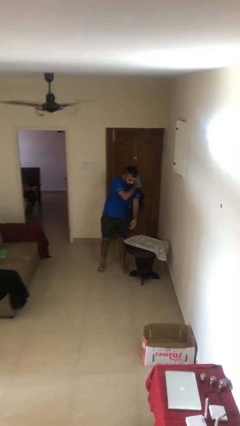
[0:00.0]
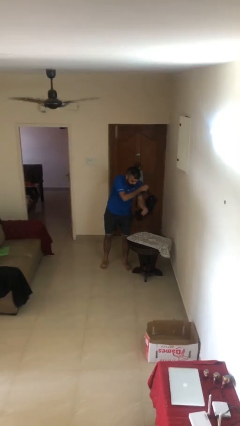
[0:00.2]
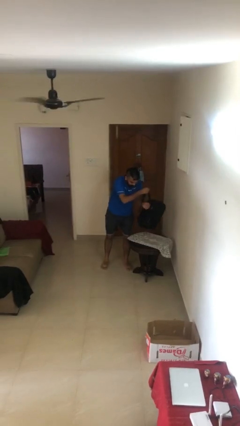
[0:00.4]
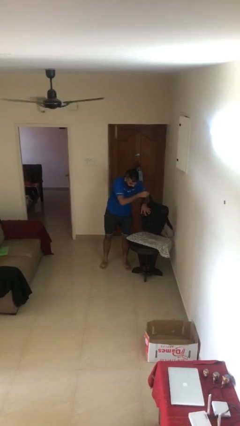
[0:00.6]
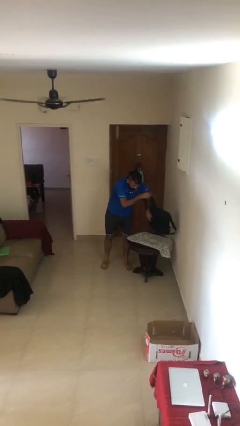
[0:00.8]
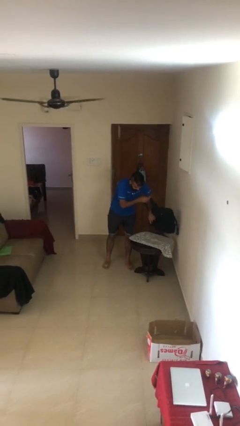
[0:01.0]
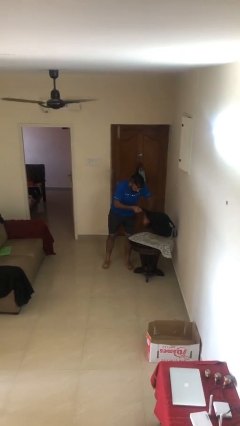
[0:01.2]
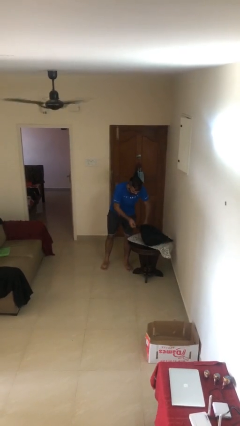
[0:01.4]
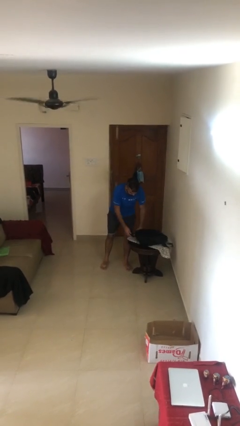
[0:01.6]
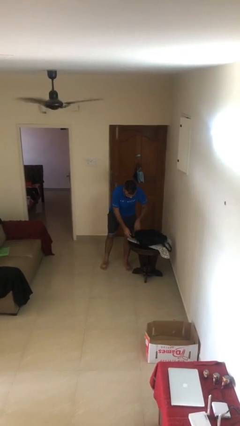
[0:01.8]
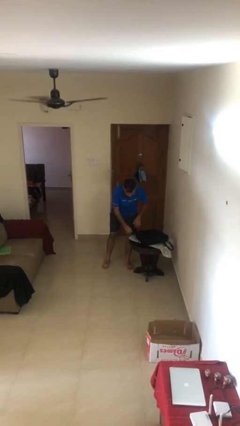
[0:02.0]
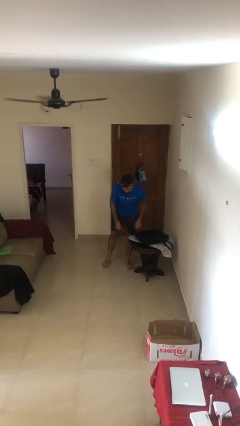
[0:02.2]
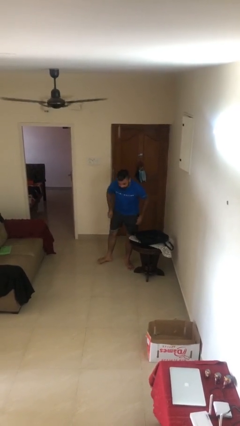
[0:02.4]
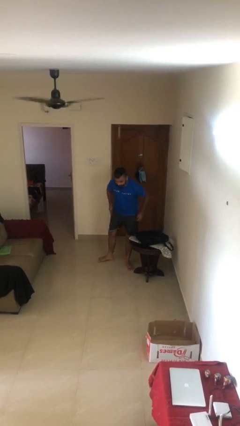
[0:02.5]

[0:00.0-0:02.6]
person puts down object on table

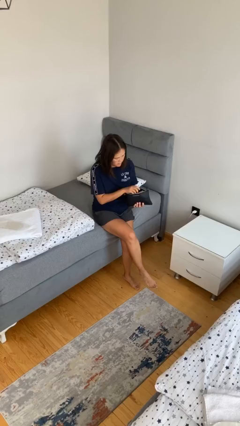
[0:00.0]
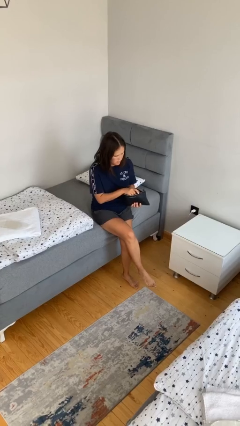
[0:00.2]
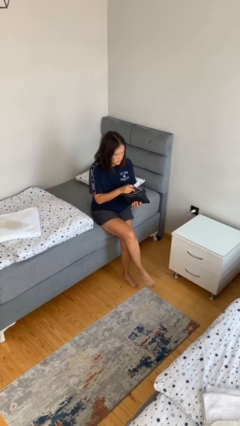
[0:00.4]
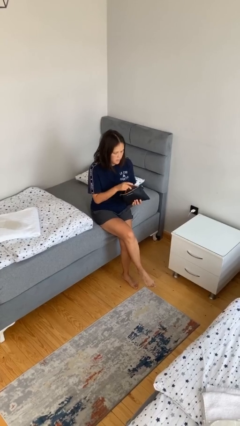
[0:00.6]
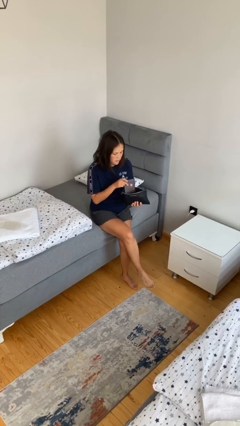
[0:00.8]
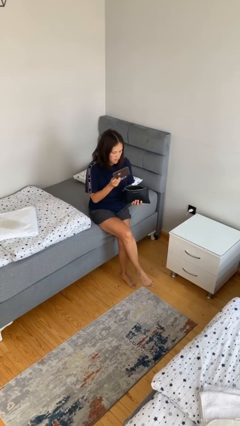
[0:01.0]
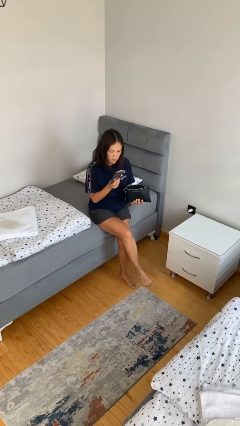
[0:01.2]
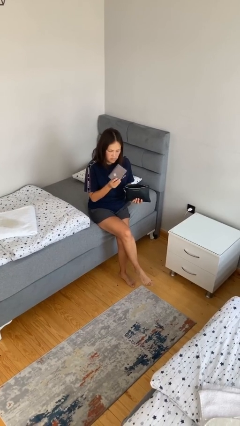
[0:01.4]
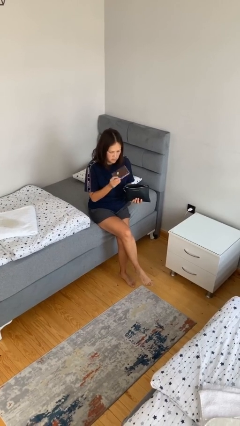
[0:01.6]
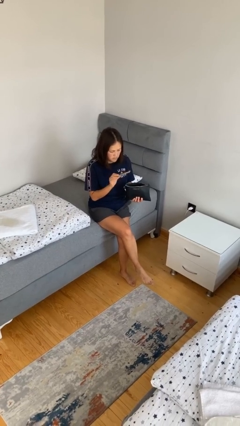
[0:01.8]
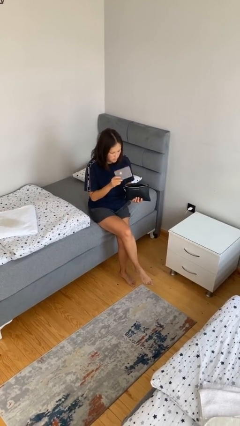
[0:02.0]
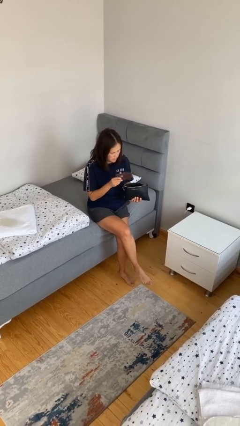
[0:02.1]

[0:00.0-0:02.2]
person takes object from purse

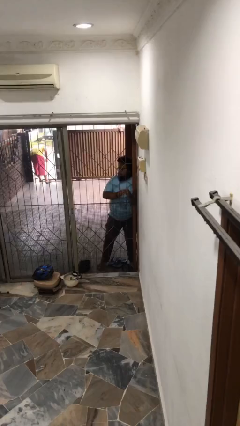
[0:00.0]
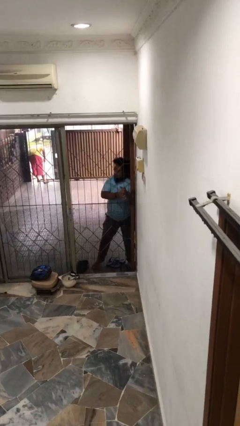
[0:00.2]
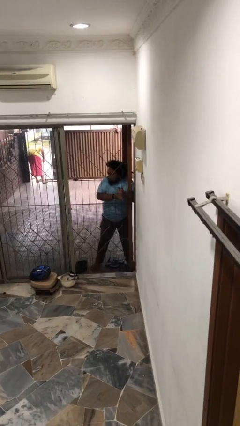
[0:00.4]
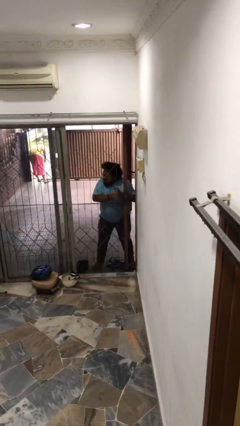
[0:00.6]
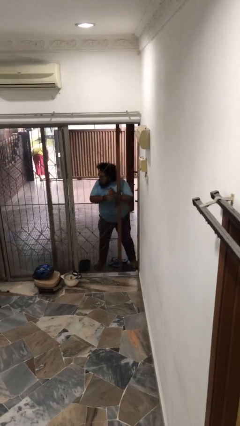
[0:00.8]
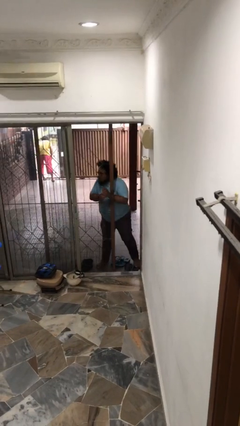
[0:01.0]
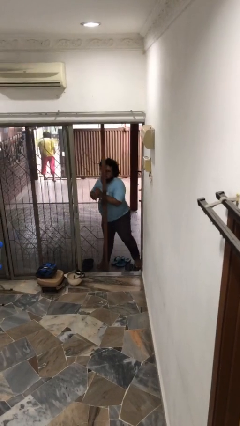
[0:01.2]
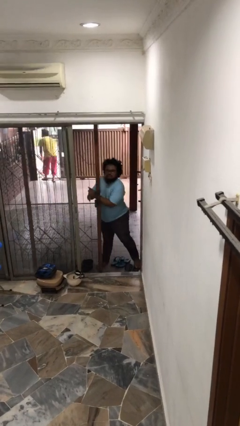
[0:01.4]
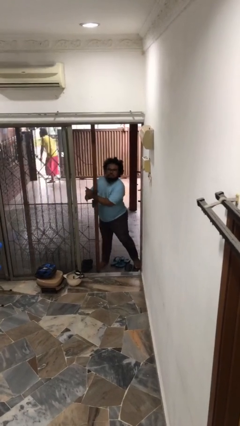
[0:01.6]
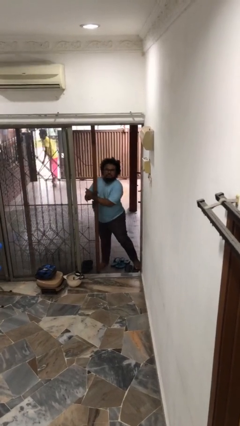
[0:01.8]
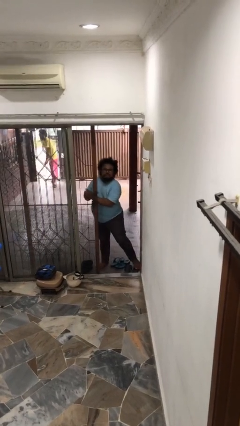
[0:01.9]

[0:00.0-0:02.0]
person opens facility door

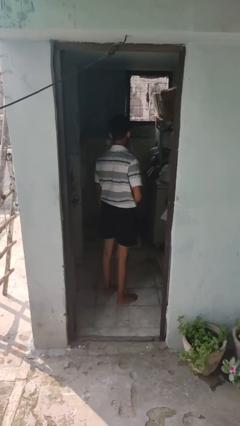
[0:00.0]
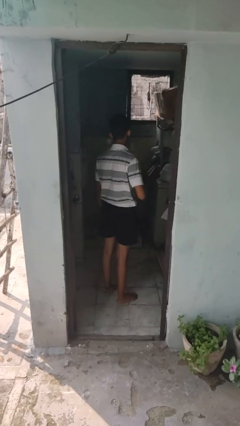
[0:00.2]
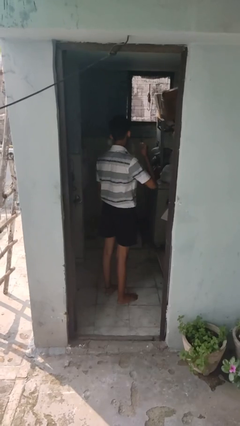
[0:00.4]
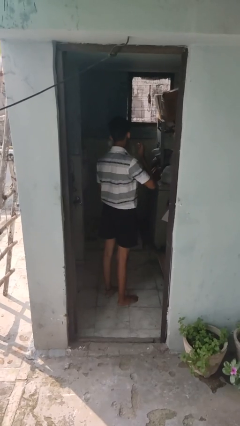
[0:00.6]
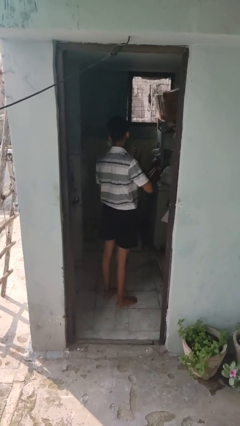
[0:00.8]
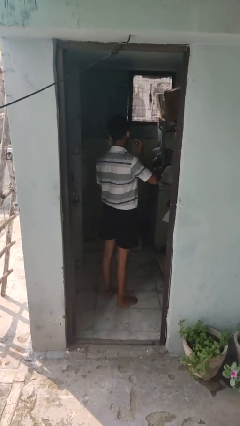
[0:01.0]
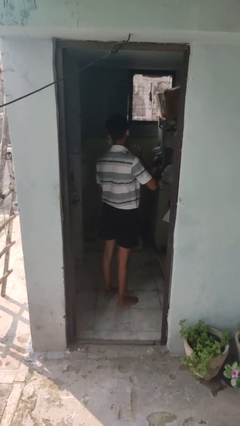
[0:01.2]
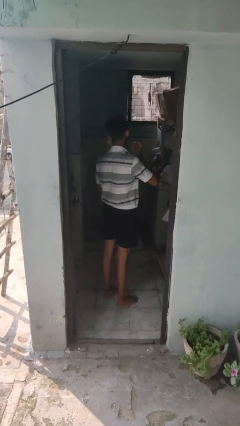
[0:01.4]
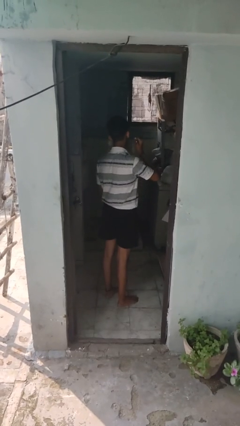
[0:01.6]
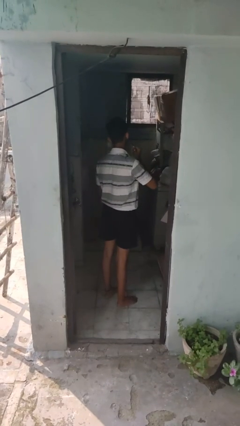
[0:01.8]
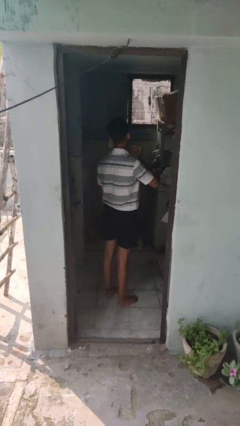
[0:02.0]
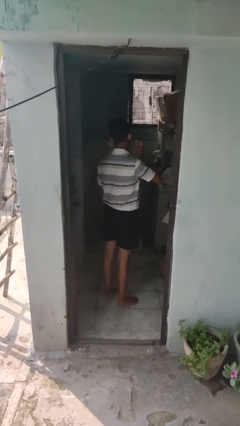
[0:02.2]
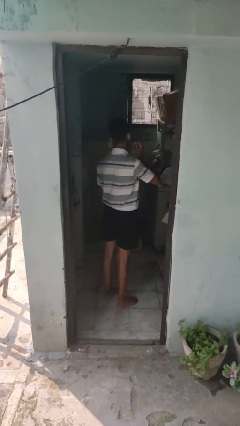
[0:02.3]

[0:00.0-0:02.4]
person shaves face

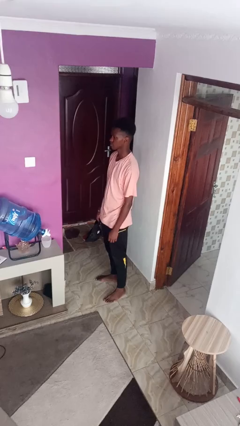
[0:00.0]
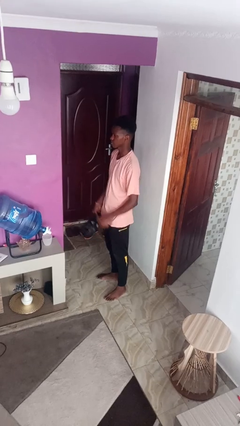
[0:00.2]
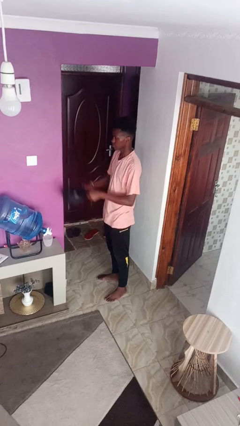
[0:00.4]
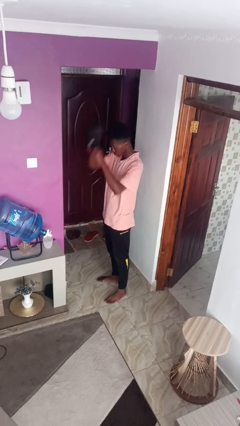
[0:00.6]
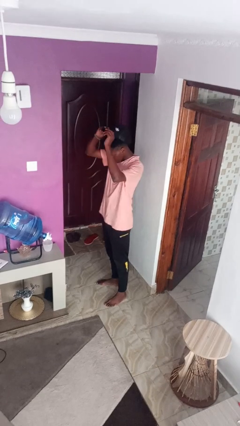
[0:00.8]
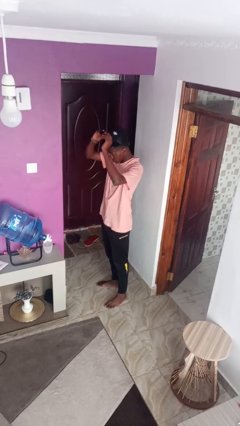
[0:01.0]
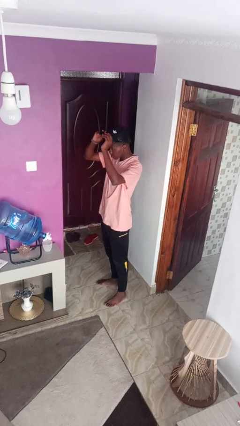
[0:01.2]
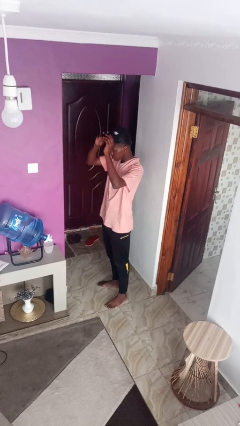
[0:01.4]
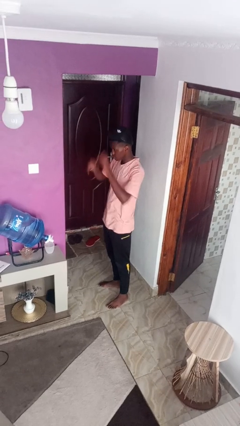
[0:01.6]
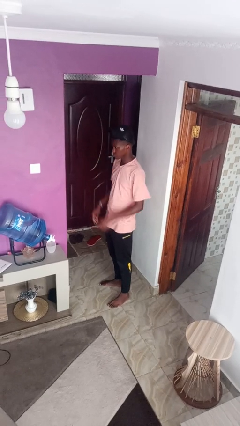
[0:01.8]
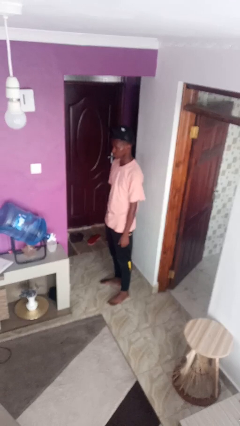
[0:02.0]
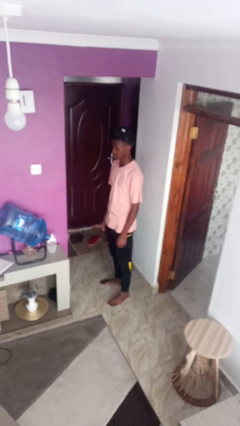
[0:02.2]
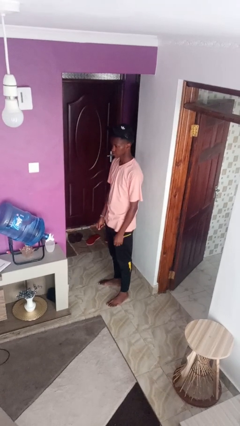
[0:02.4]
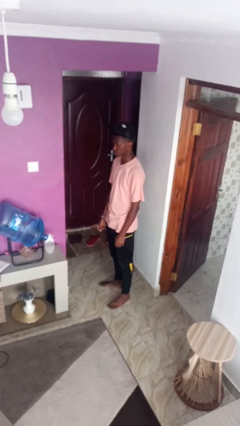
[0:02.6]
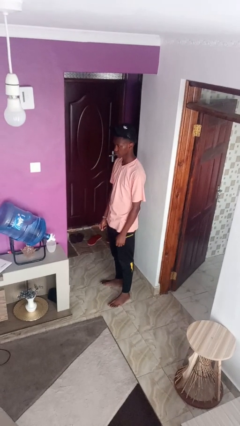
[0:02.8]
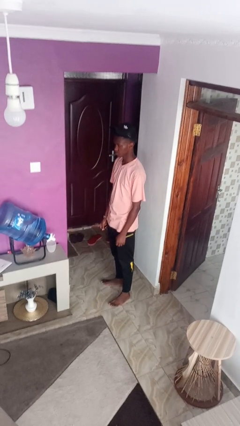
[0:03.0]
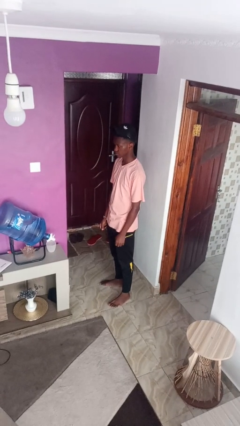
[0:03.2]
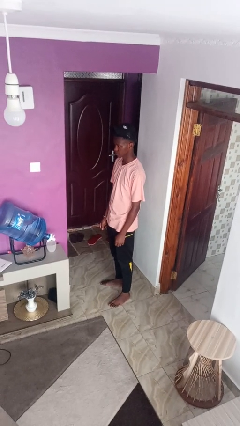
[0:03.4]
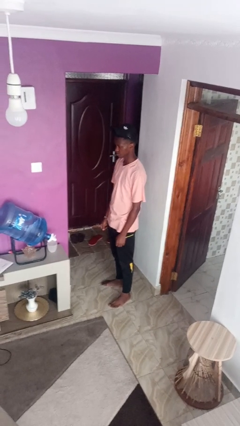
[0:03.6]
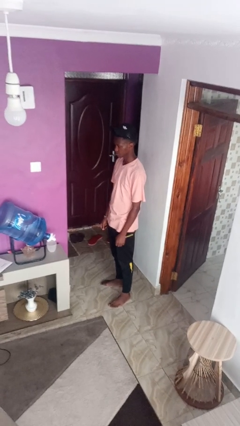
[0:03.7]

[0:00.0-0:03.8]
person puts on hat

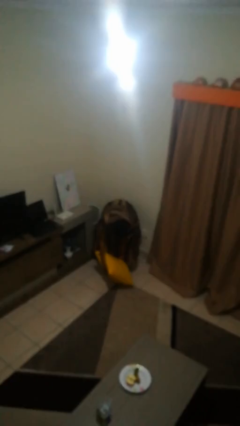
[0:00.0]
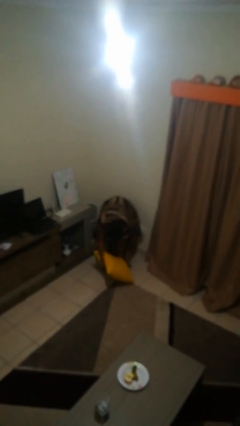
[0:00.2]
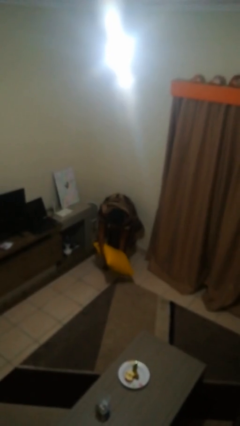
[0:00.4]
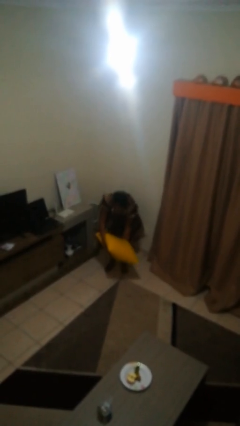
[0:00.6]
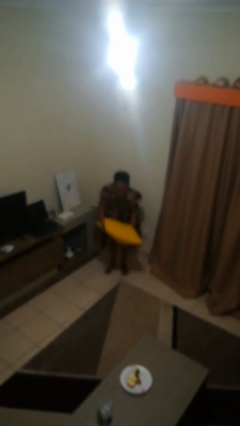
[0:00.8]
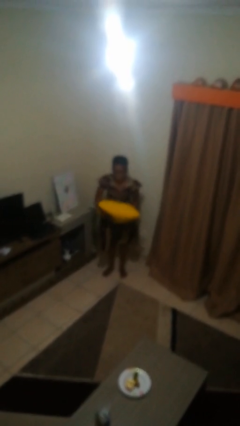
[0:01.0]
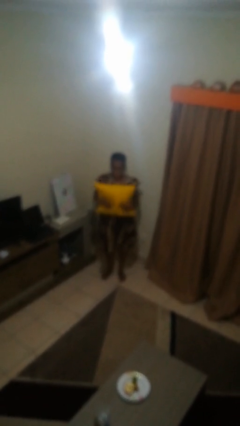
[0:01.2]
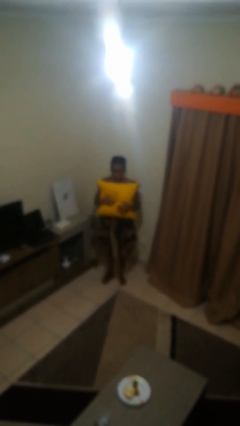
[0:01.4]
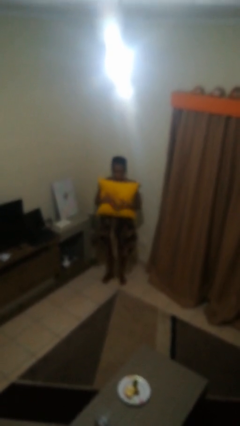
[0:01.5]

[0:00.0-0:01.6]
person catches dropped object

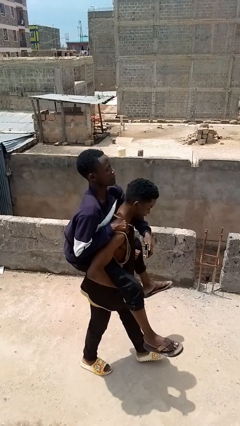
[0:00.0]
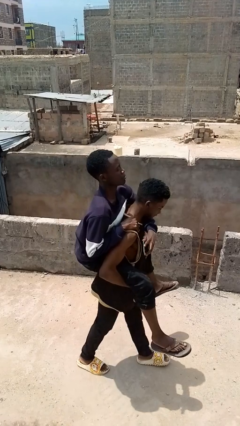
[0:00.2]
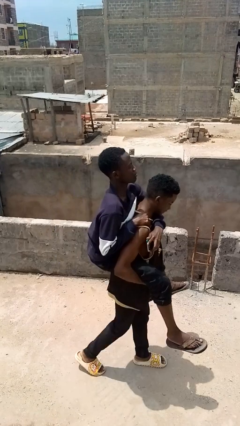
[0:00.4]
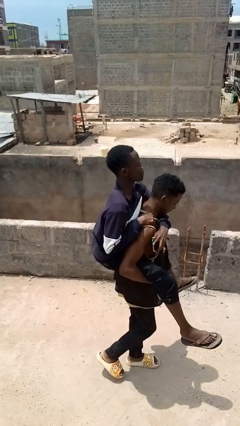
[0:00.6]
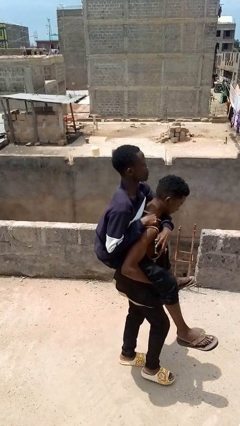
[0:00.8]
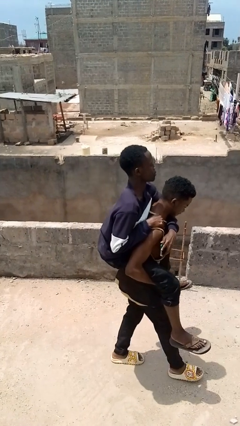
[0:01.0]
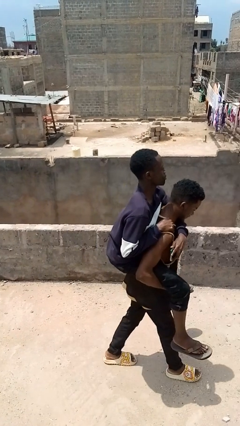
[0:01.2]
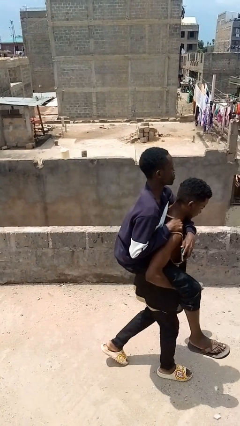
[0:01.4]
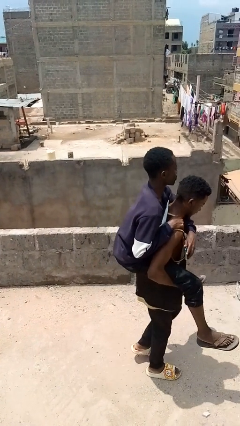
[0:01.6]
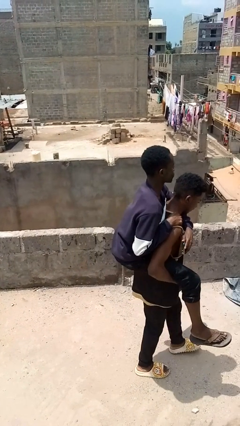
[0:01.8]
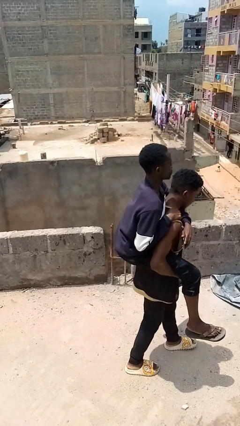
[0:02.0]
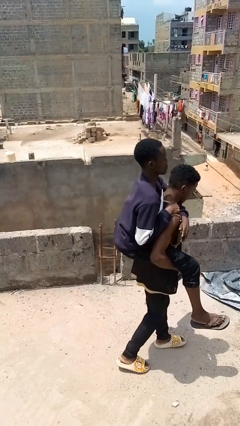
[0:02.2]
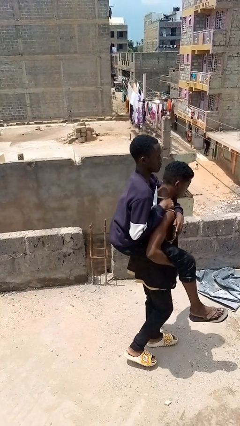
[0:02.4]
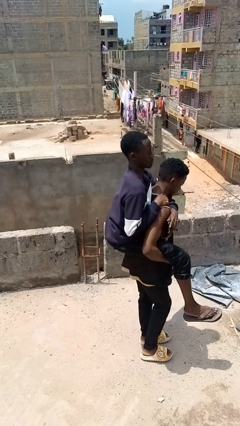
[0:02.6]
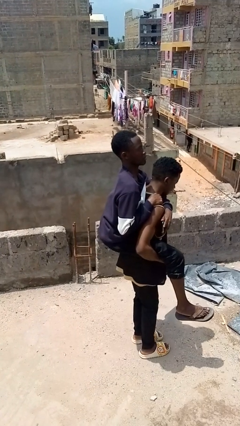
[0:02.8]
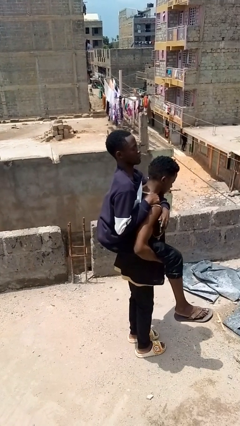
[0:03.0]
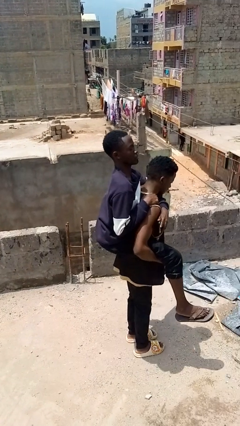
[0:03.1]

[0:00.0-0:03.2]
person carries person on back
